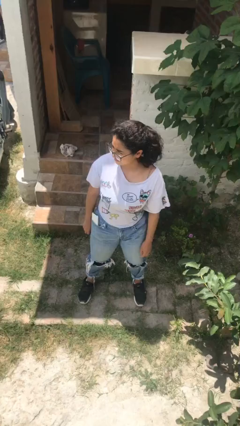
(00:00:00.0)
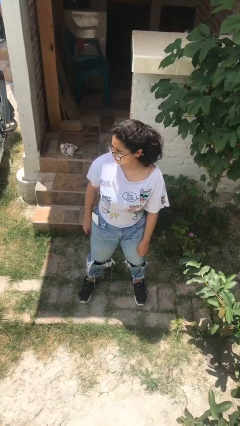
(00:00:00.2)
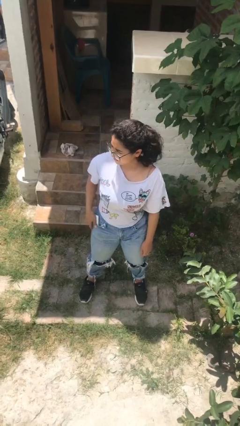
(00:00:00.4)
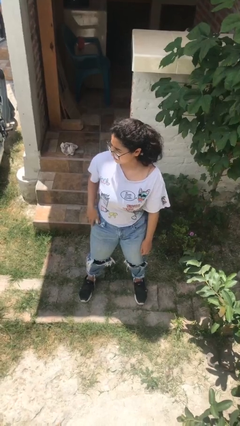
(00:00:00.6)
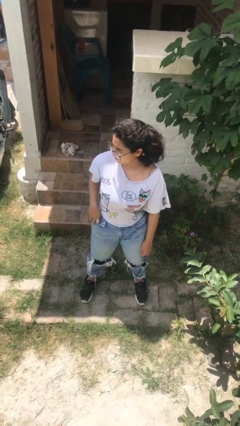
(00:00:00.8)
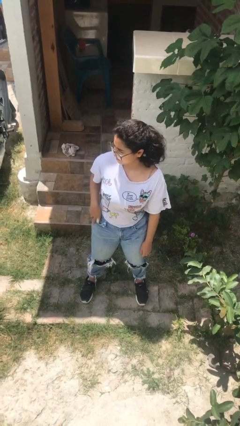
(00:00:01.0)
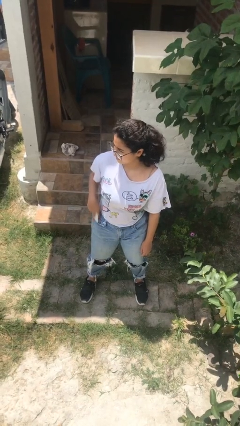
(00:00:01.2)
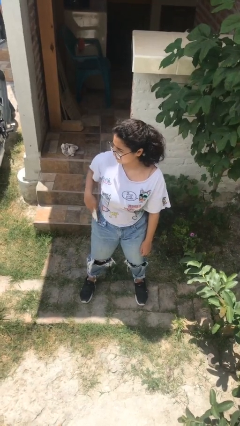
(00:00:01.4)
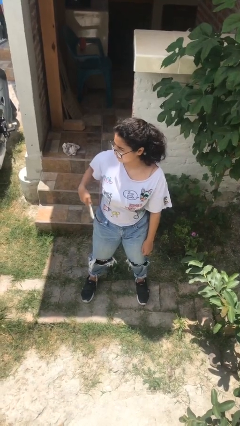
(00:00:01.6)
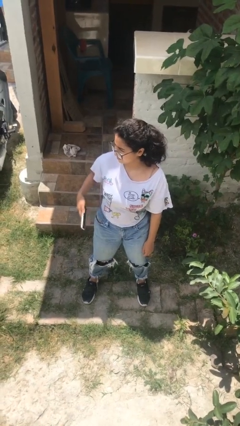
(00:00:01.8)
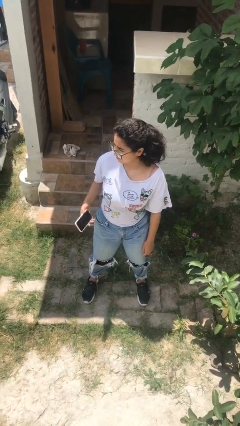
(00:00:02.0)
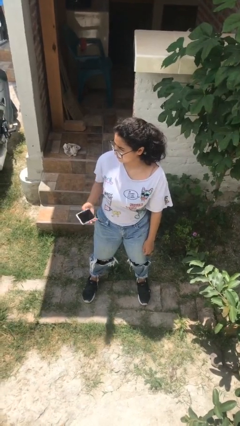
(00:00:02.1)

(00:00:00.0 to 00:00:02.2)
person takes phone from pocket

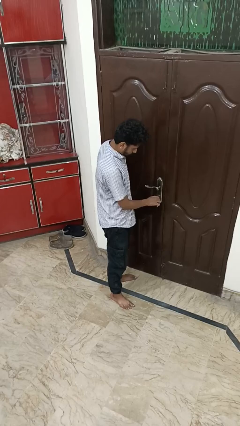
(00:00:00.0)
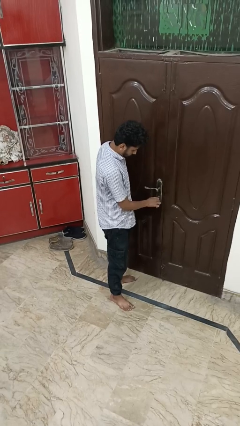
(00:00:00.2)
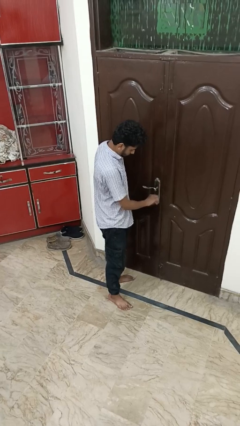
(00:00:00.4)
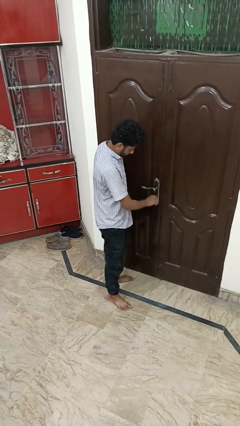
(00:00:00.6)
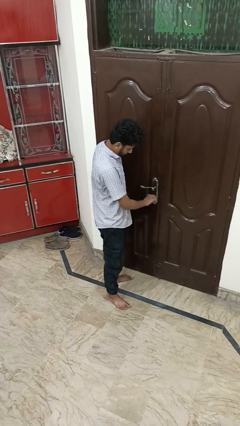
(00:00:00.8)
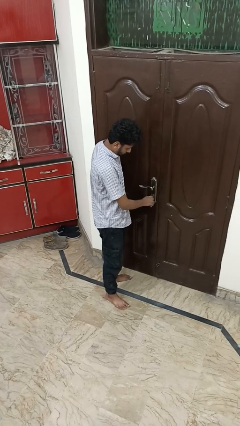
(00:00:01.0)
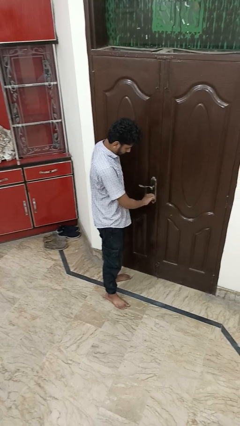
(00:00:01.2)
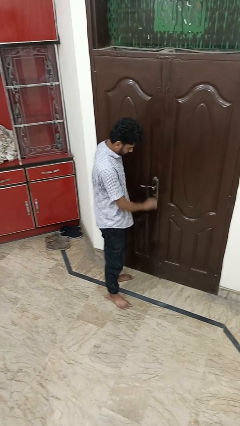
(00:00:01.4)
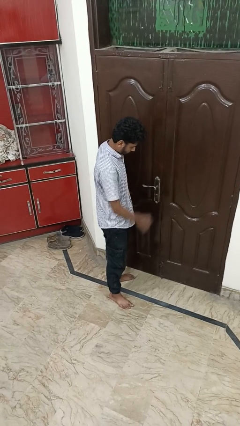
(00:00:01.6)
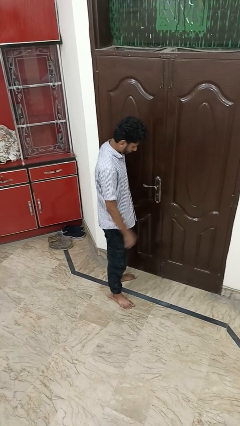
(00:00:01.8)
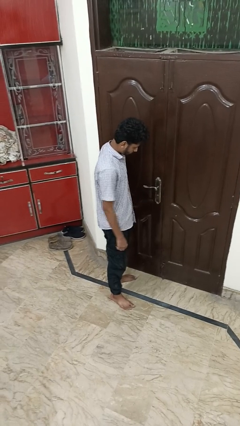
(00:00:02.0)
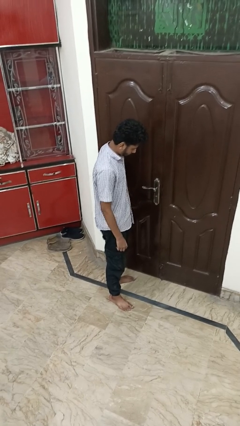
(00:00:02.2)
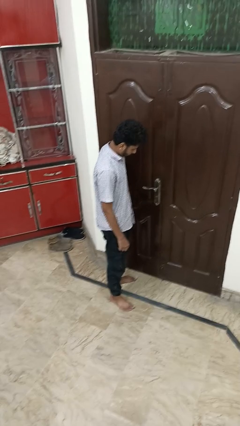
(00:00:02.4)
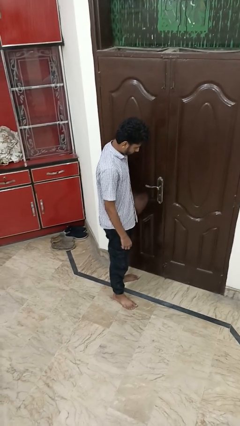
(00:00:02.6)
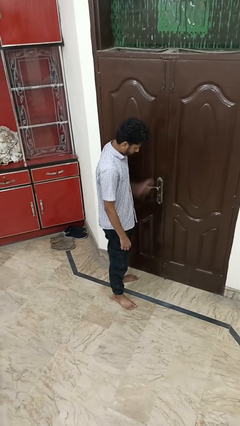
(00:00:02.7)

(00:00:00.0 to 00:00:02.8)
person unlocks door with keys

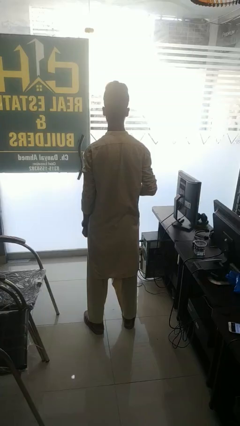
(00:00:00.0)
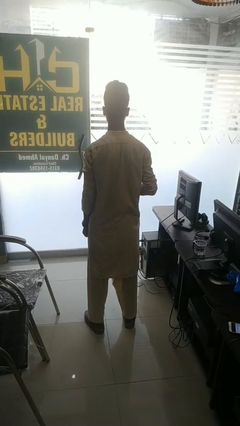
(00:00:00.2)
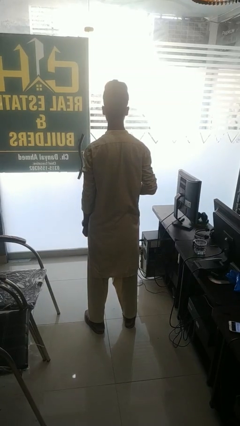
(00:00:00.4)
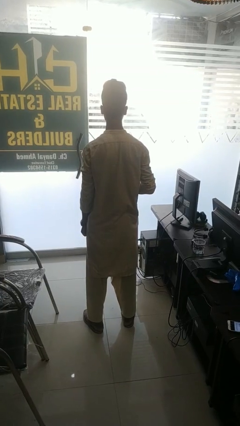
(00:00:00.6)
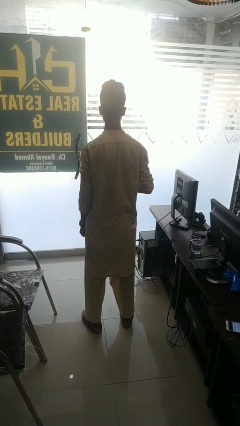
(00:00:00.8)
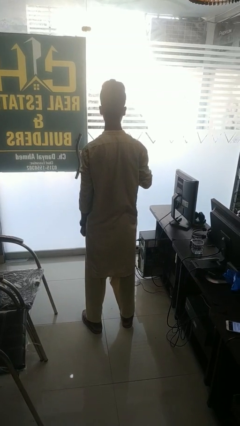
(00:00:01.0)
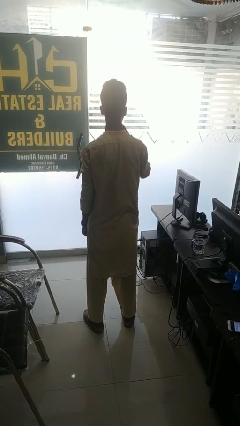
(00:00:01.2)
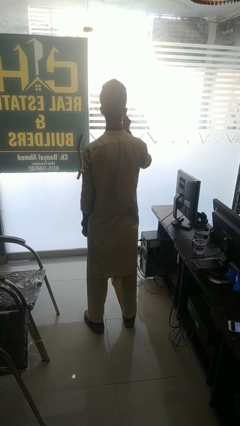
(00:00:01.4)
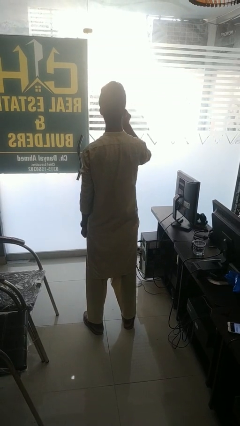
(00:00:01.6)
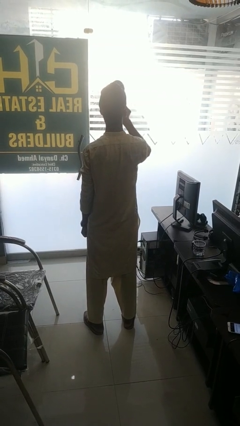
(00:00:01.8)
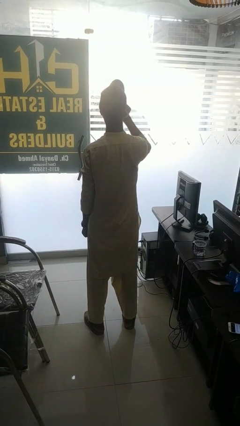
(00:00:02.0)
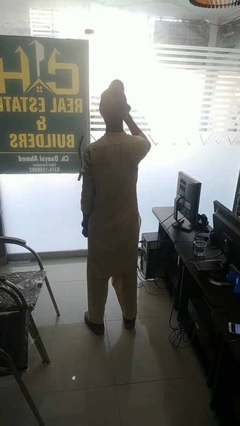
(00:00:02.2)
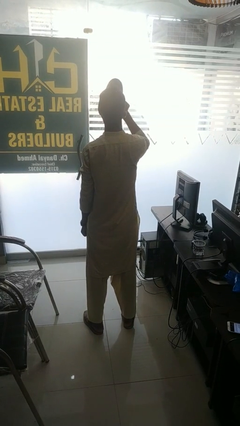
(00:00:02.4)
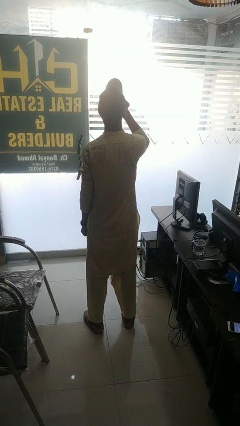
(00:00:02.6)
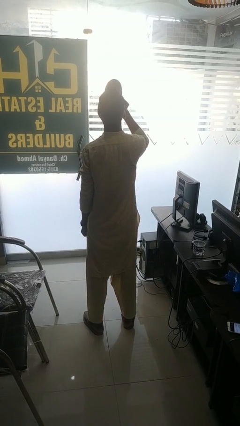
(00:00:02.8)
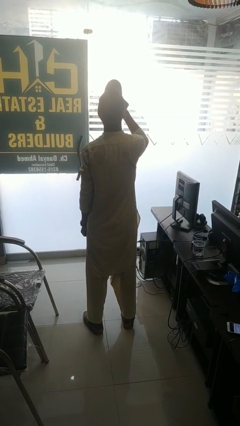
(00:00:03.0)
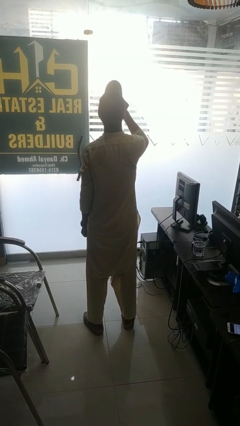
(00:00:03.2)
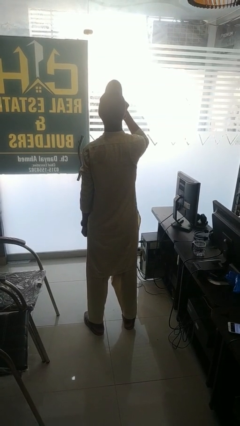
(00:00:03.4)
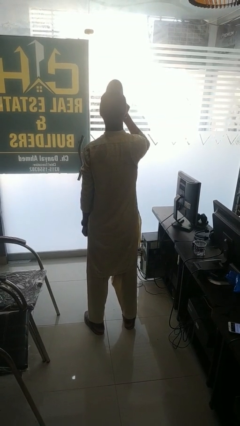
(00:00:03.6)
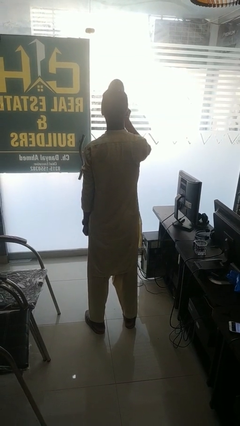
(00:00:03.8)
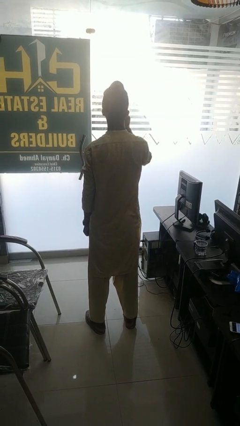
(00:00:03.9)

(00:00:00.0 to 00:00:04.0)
person drinks from bottle

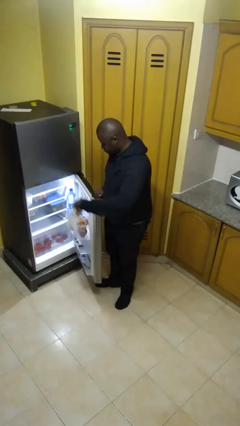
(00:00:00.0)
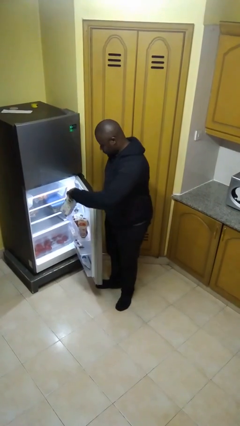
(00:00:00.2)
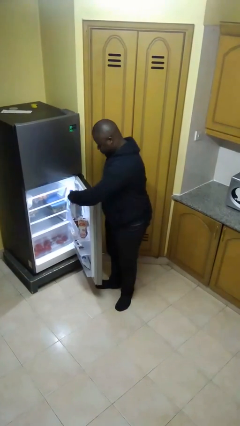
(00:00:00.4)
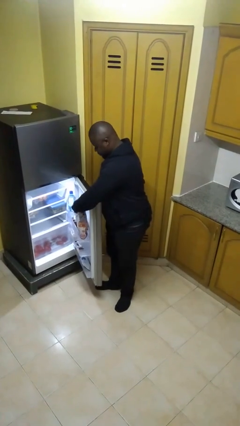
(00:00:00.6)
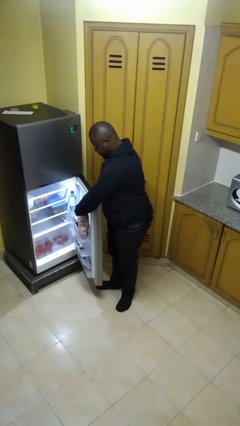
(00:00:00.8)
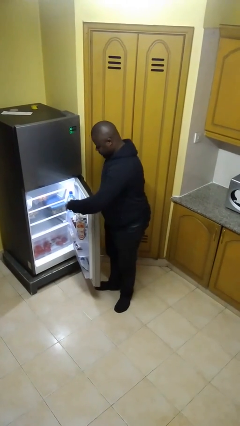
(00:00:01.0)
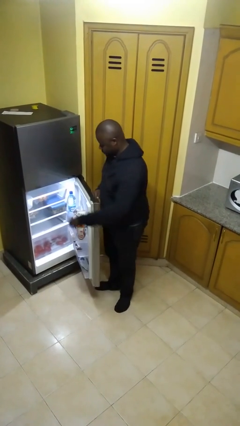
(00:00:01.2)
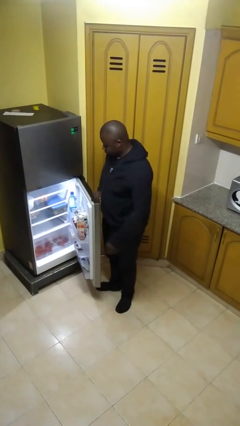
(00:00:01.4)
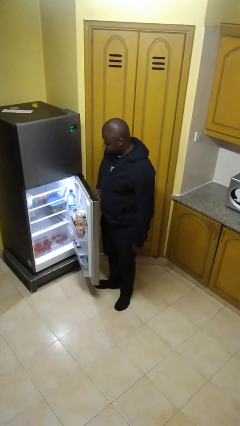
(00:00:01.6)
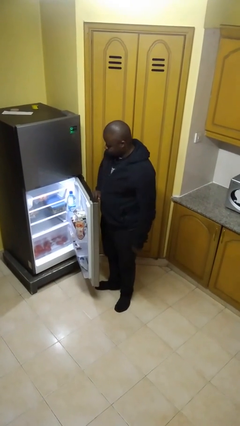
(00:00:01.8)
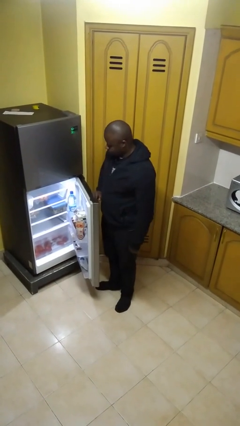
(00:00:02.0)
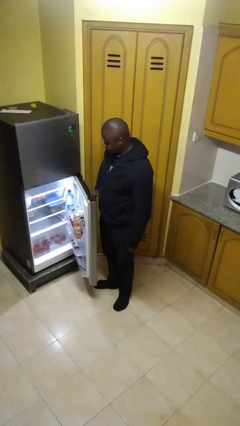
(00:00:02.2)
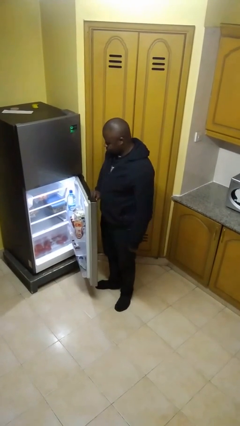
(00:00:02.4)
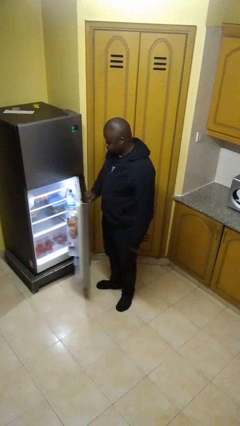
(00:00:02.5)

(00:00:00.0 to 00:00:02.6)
person puts object into refrigerator

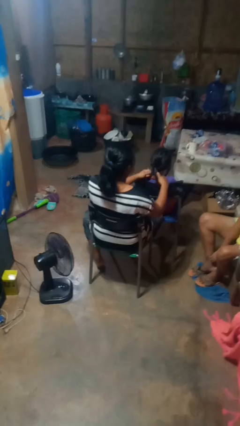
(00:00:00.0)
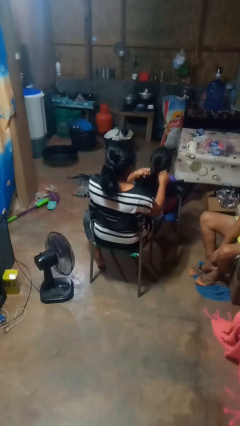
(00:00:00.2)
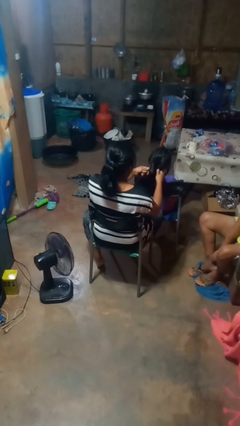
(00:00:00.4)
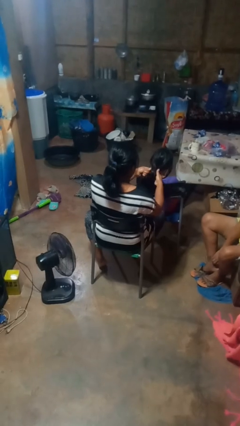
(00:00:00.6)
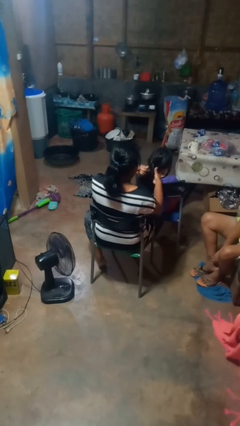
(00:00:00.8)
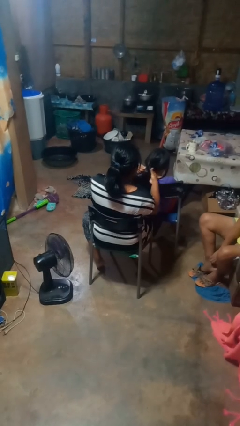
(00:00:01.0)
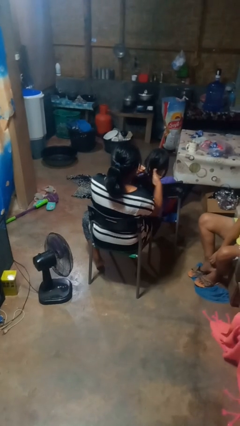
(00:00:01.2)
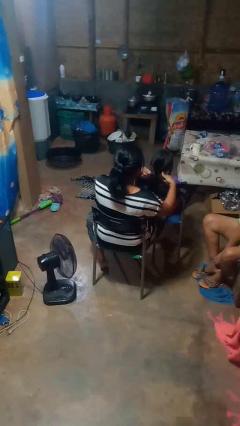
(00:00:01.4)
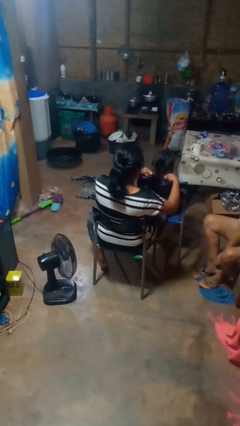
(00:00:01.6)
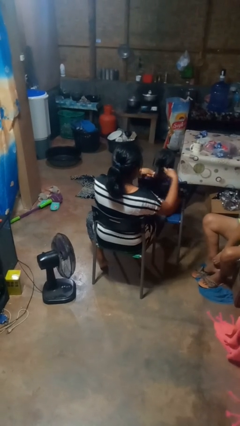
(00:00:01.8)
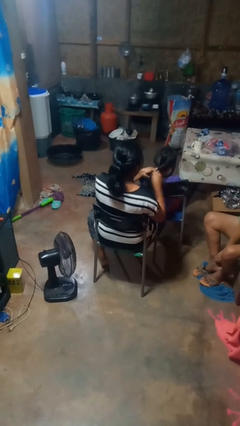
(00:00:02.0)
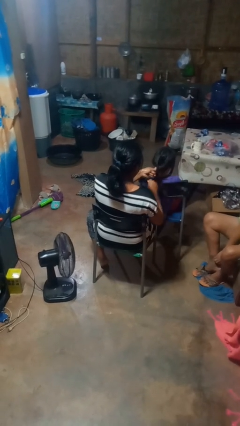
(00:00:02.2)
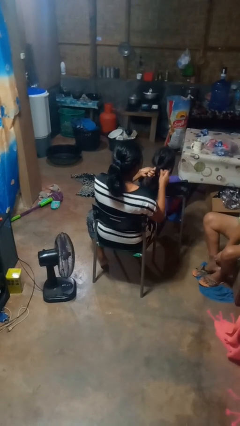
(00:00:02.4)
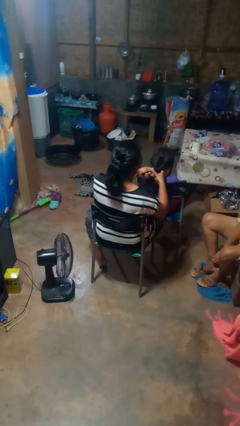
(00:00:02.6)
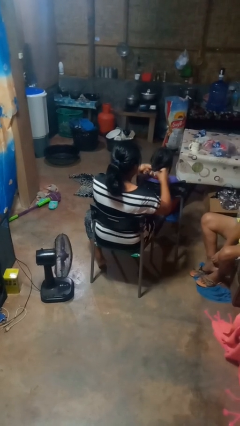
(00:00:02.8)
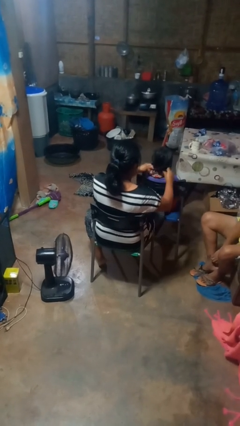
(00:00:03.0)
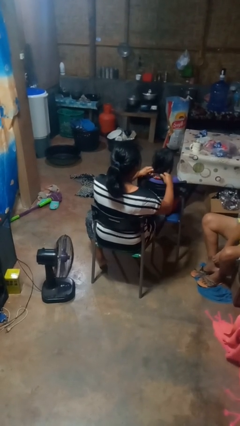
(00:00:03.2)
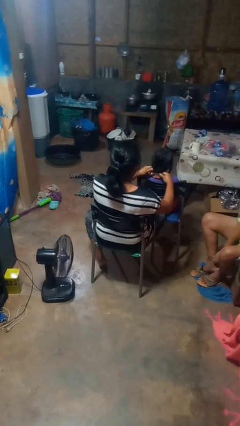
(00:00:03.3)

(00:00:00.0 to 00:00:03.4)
person braids hair of person

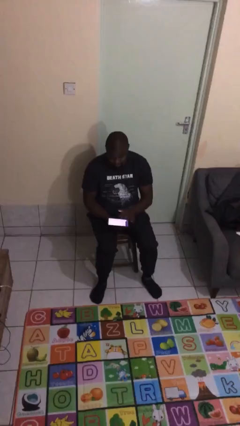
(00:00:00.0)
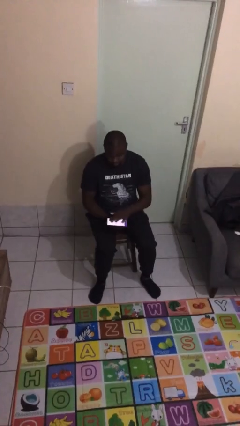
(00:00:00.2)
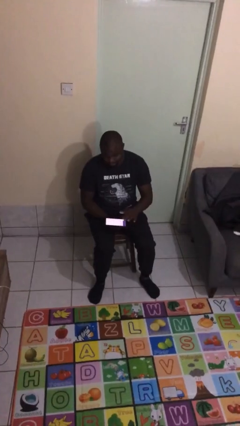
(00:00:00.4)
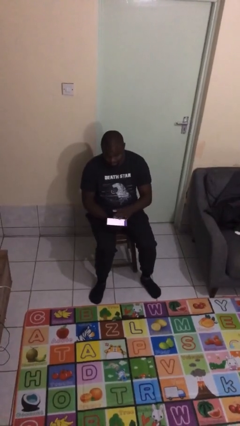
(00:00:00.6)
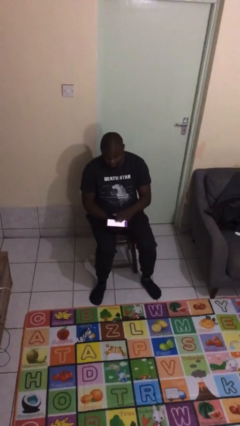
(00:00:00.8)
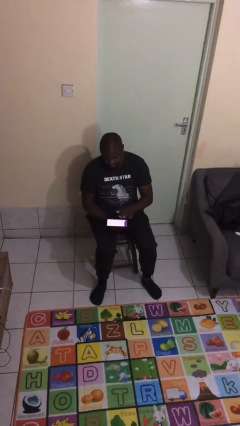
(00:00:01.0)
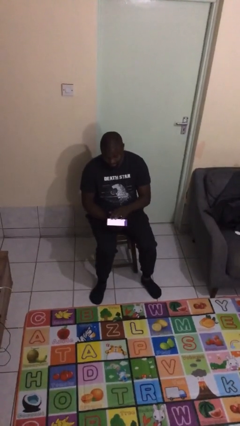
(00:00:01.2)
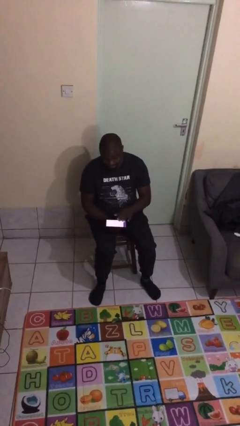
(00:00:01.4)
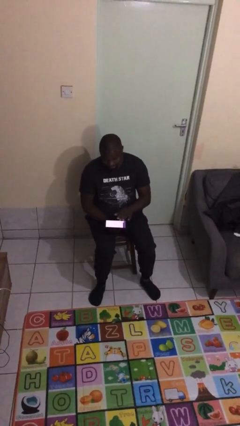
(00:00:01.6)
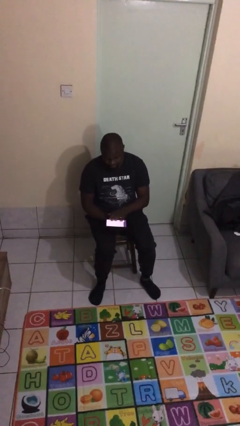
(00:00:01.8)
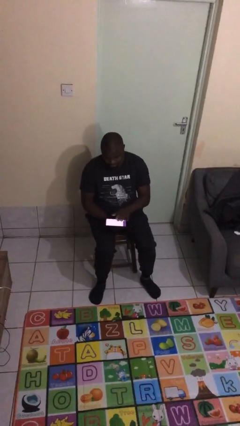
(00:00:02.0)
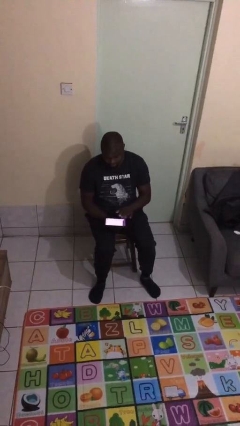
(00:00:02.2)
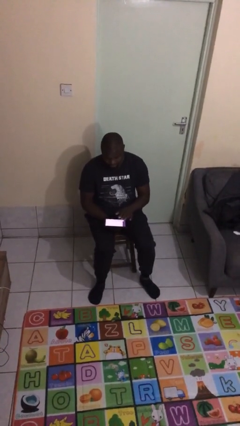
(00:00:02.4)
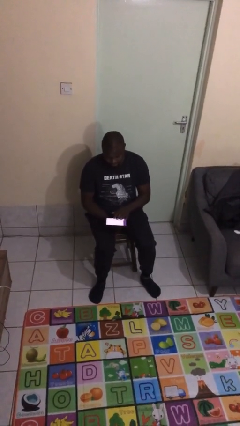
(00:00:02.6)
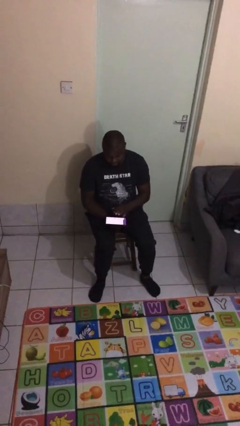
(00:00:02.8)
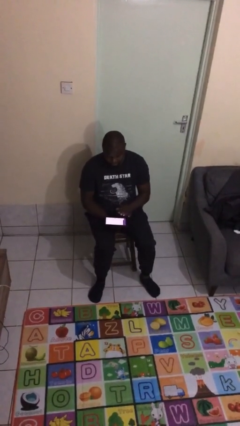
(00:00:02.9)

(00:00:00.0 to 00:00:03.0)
person interacts with tablet
